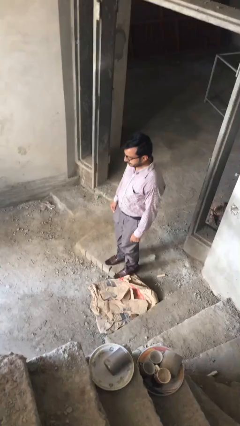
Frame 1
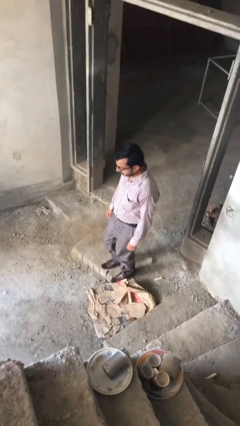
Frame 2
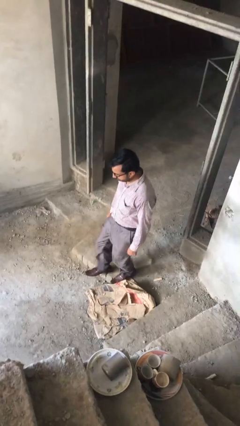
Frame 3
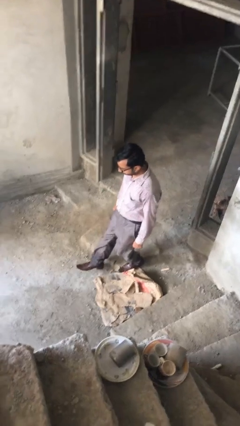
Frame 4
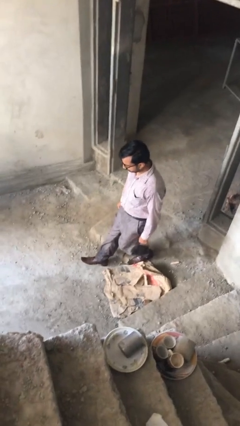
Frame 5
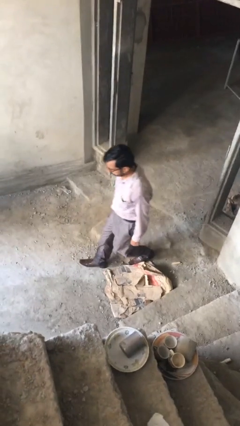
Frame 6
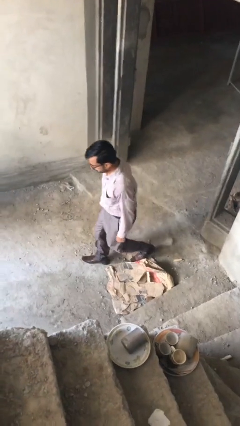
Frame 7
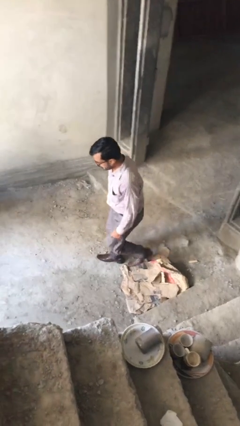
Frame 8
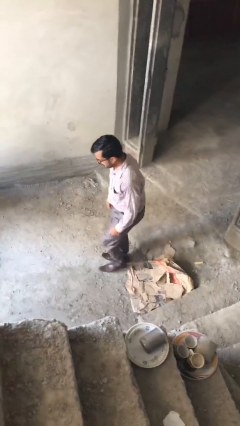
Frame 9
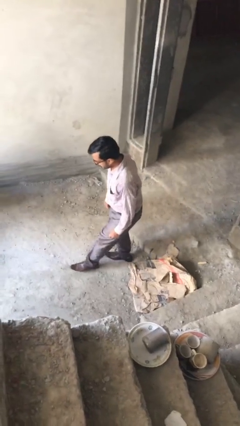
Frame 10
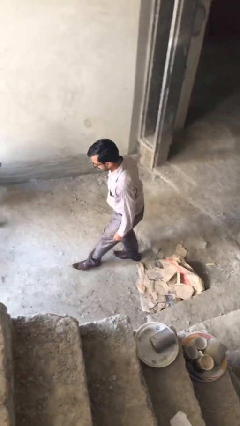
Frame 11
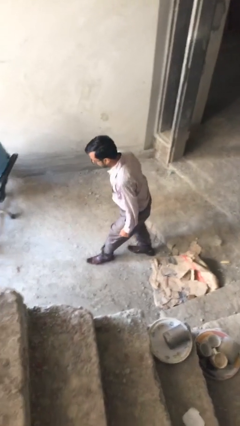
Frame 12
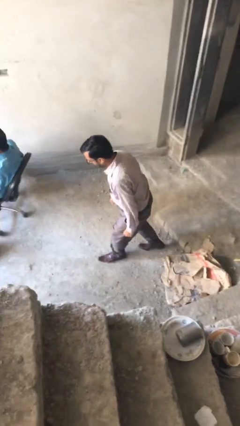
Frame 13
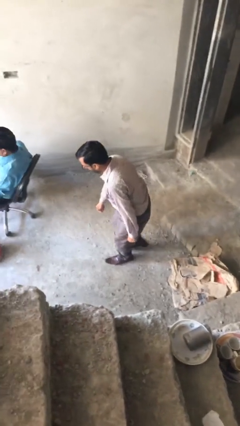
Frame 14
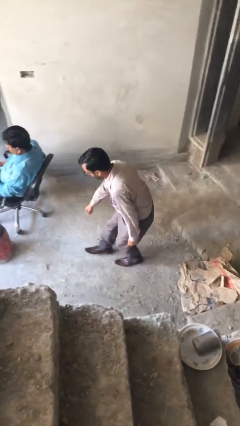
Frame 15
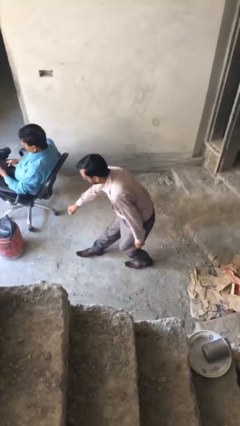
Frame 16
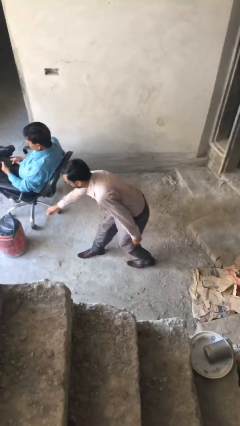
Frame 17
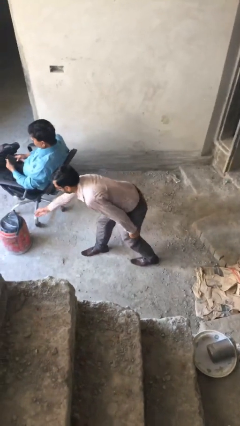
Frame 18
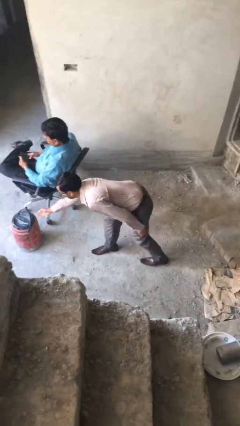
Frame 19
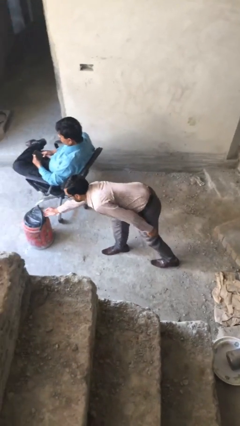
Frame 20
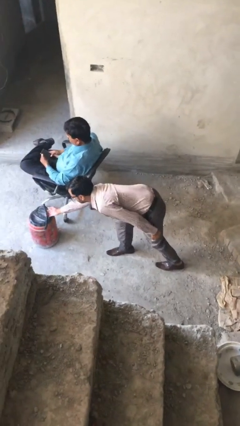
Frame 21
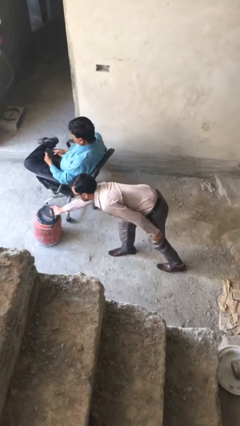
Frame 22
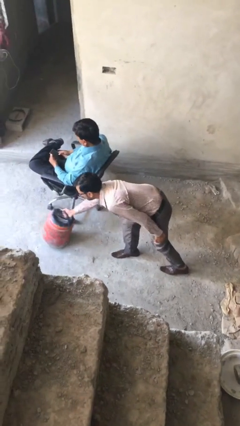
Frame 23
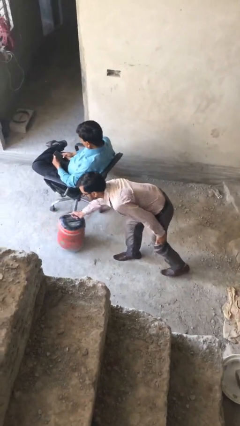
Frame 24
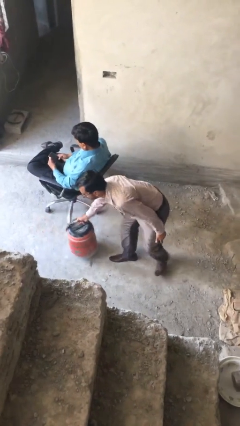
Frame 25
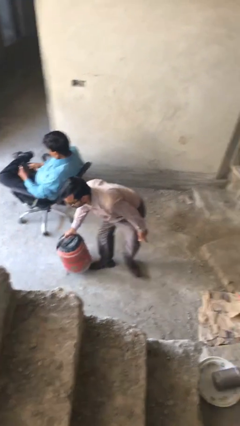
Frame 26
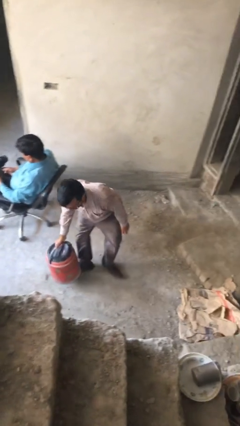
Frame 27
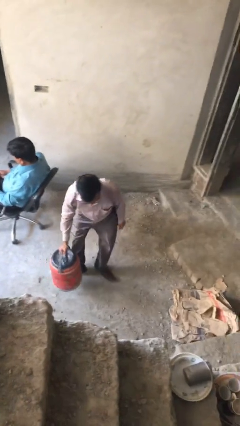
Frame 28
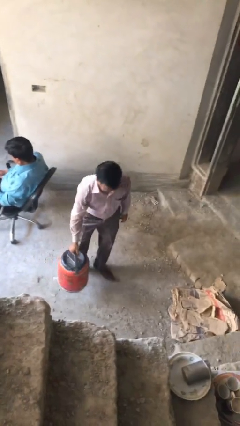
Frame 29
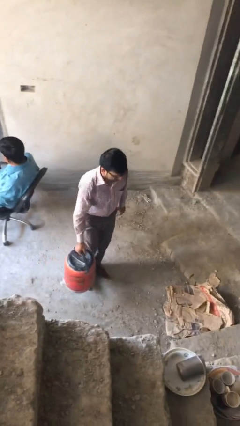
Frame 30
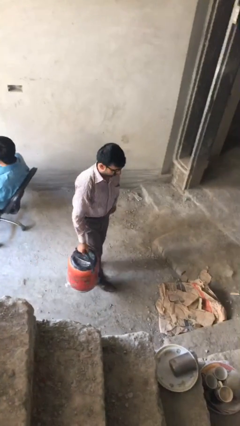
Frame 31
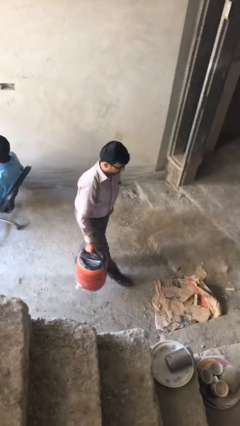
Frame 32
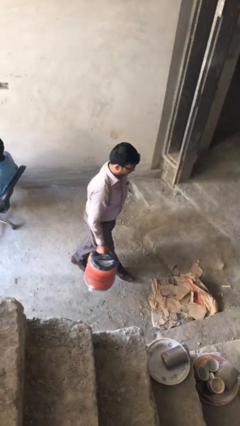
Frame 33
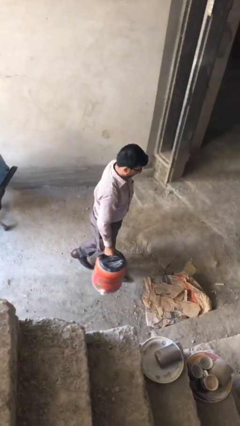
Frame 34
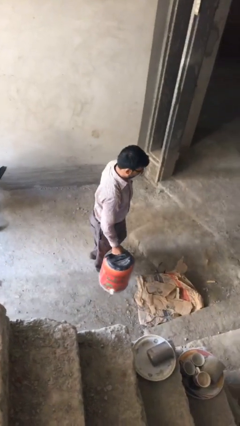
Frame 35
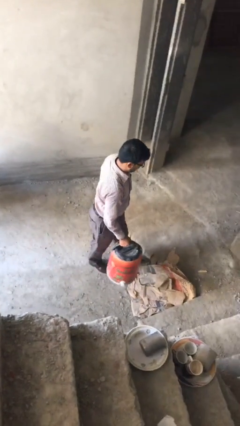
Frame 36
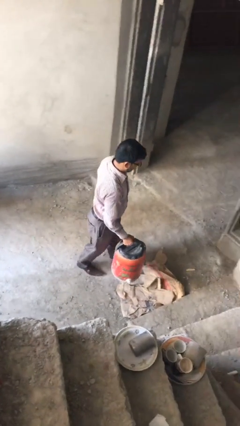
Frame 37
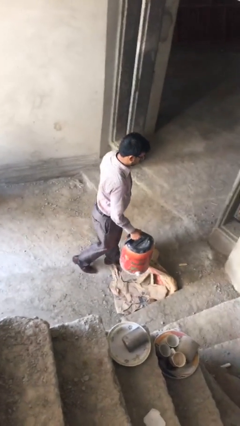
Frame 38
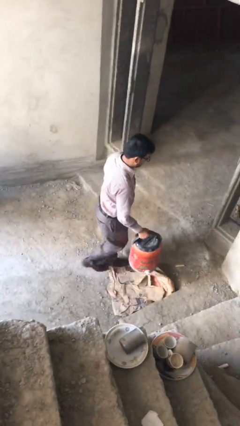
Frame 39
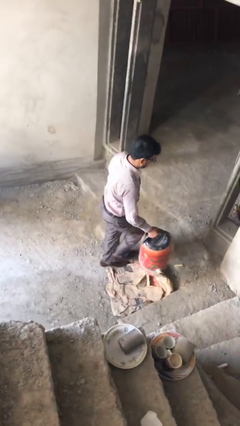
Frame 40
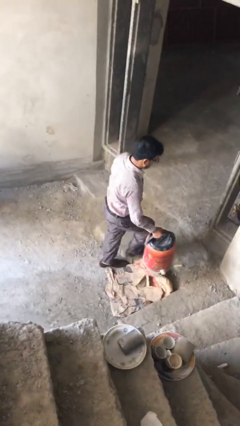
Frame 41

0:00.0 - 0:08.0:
person steals object from person

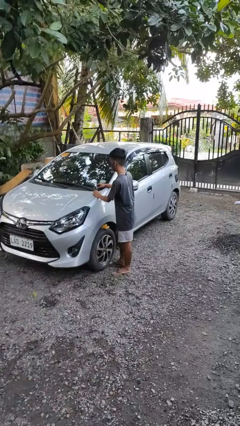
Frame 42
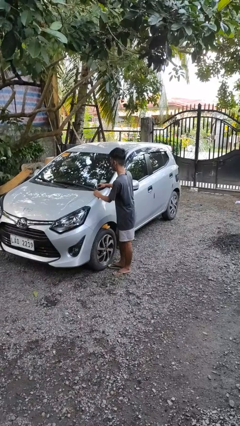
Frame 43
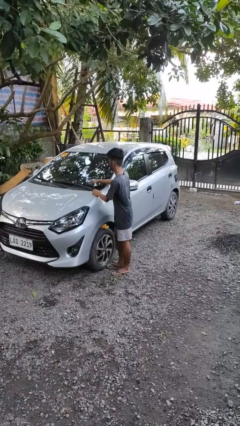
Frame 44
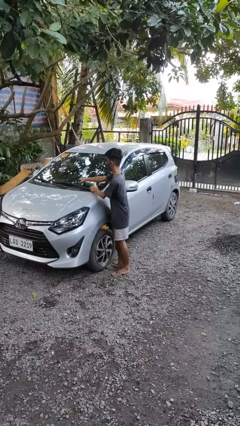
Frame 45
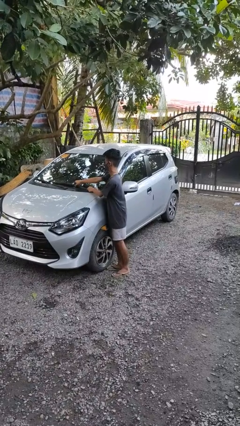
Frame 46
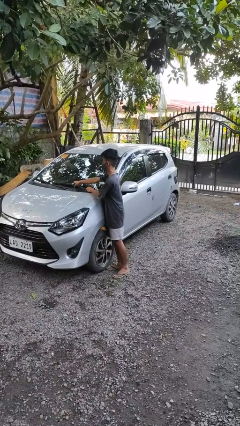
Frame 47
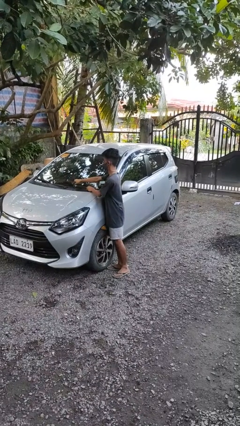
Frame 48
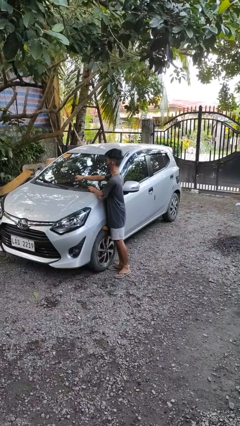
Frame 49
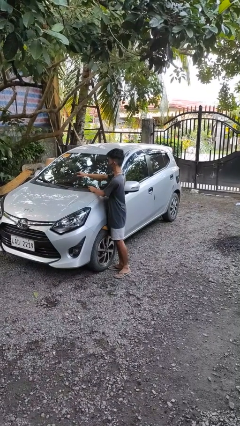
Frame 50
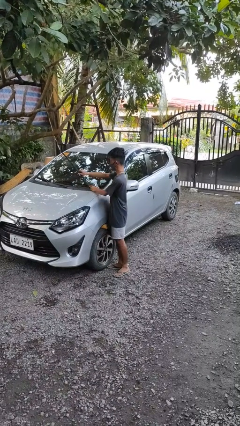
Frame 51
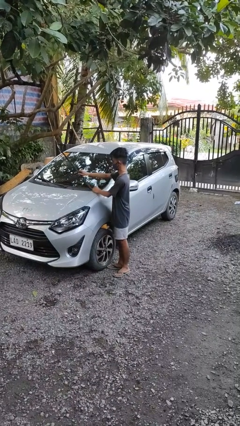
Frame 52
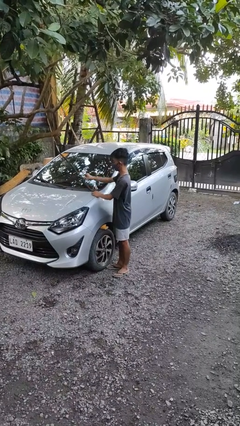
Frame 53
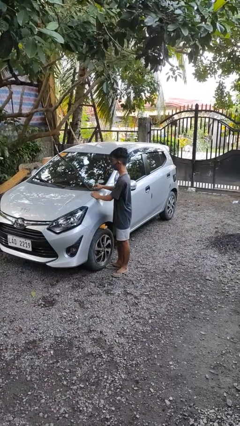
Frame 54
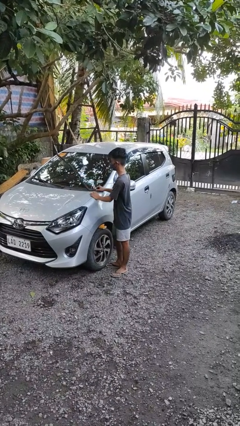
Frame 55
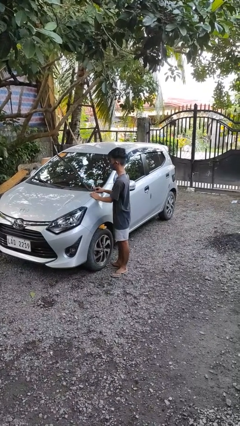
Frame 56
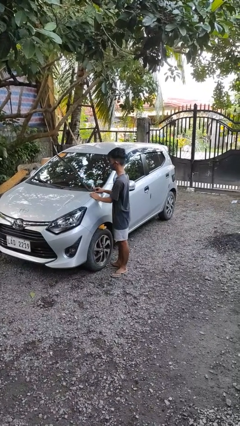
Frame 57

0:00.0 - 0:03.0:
person flips up car wipers

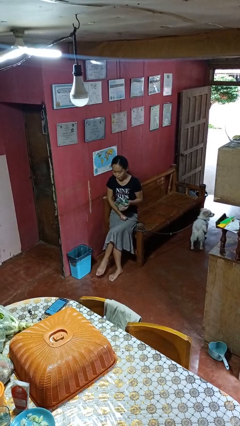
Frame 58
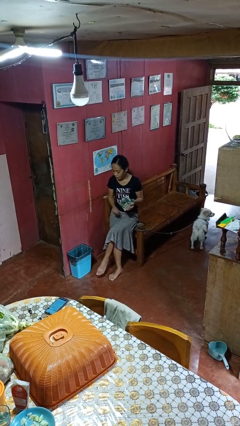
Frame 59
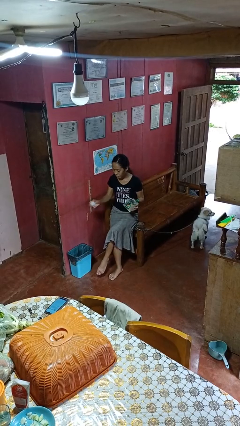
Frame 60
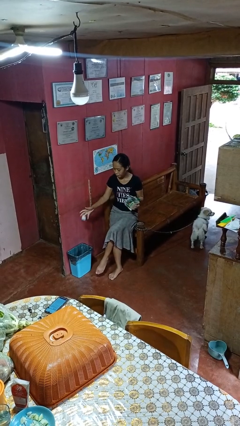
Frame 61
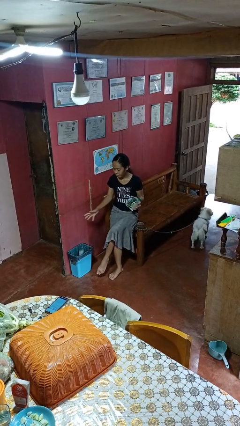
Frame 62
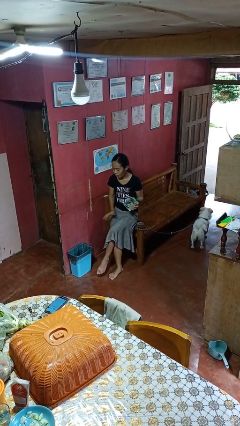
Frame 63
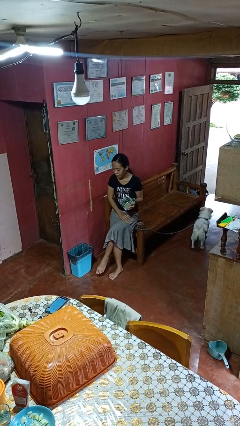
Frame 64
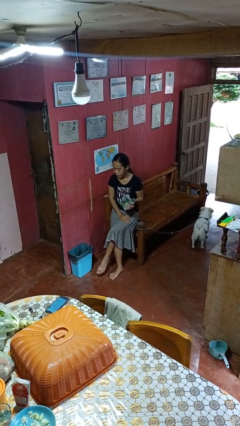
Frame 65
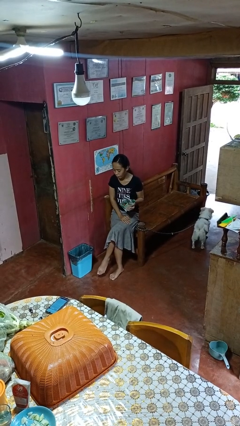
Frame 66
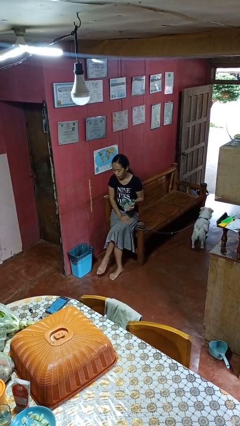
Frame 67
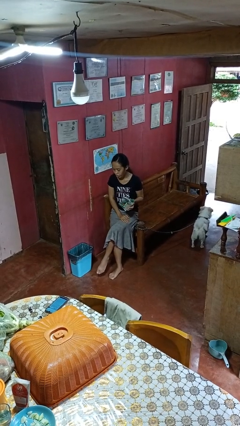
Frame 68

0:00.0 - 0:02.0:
person discards trash

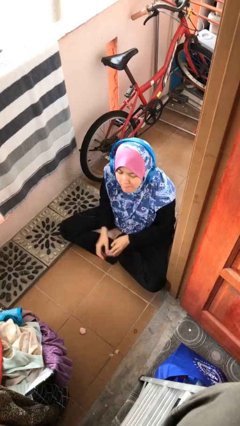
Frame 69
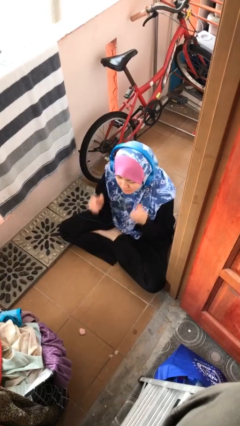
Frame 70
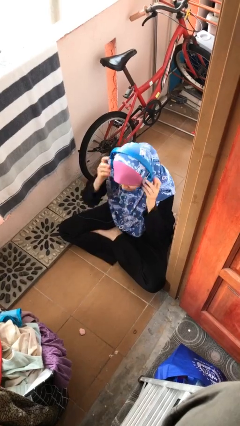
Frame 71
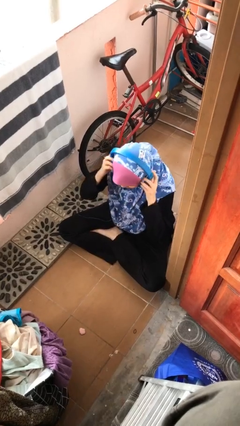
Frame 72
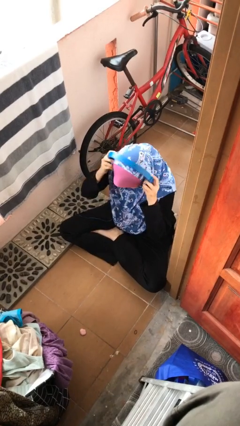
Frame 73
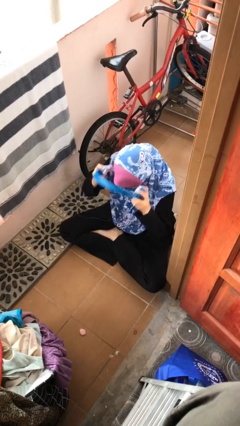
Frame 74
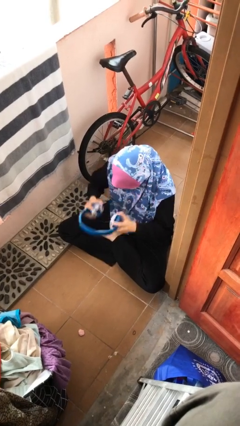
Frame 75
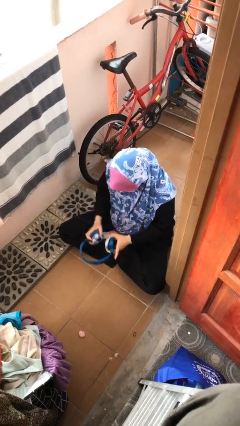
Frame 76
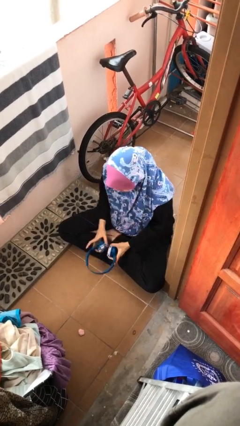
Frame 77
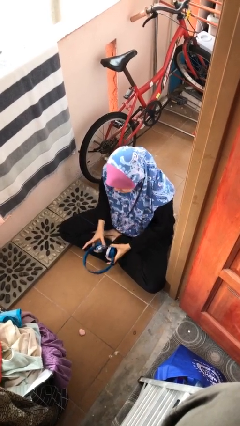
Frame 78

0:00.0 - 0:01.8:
person takes off headphones

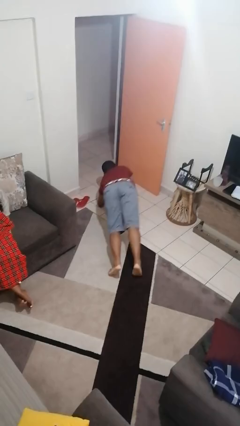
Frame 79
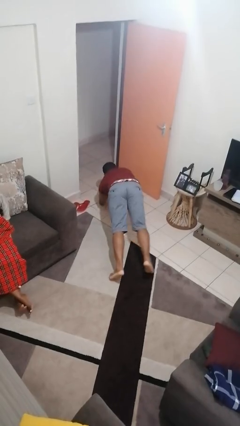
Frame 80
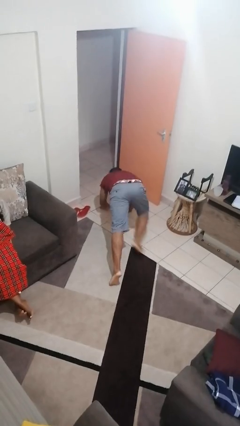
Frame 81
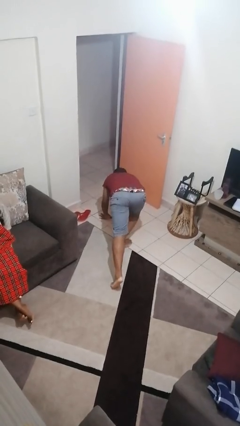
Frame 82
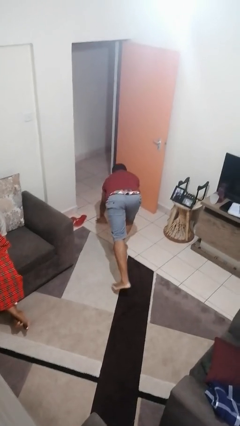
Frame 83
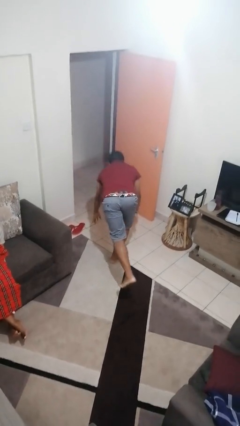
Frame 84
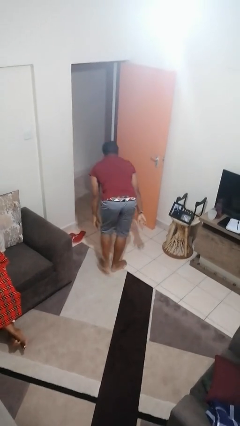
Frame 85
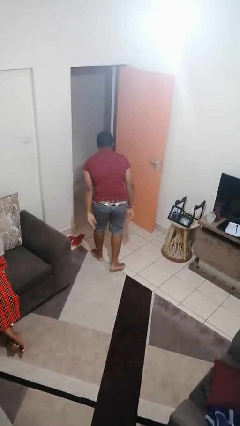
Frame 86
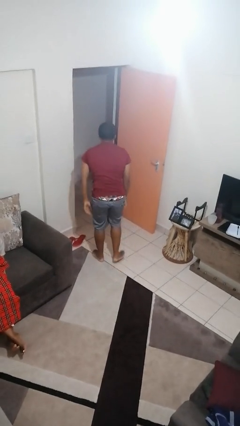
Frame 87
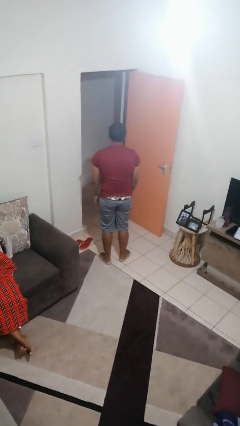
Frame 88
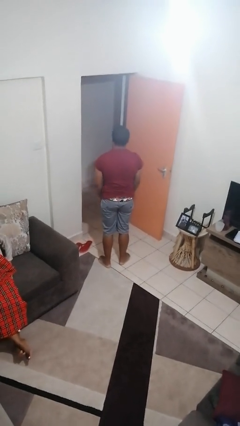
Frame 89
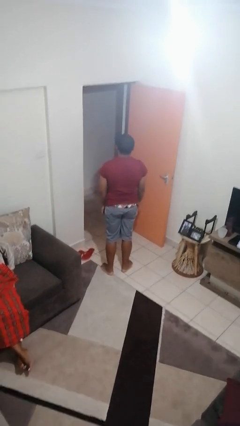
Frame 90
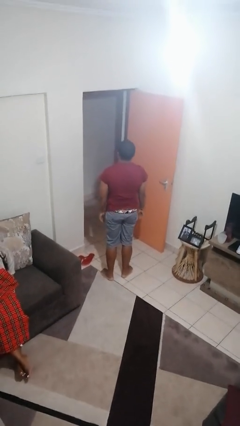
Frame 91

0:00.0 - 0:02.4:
person stands up from floor

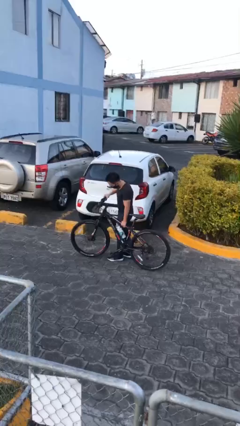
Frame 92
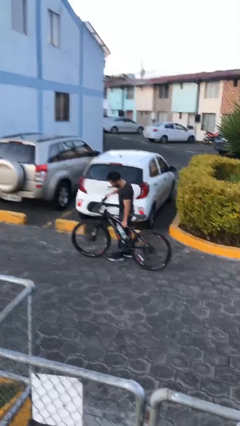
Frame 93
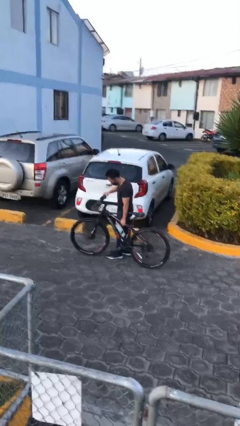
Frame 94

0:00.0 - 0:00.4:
person puts down object on floor
